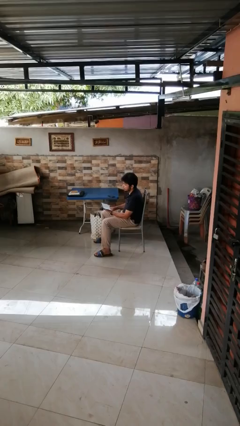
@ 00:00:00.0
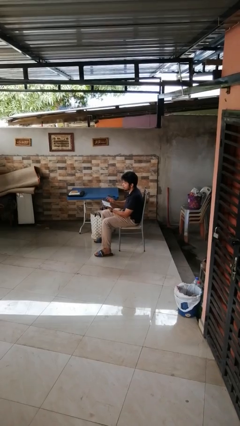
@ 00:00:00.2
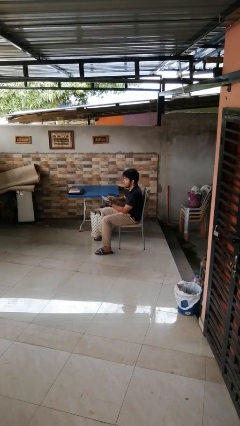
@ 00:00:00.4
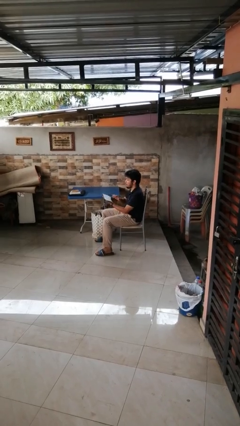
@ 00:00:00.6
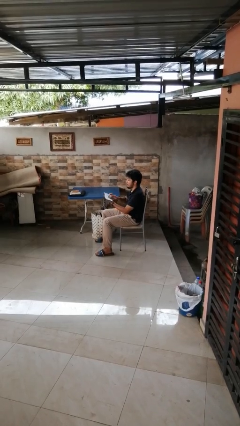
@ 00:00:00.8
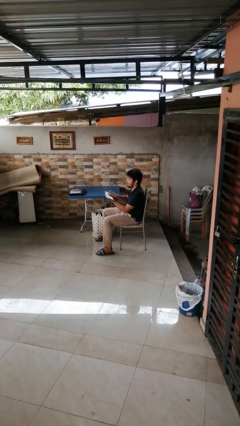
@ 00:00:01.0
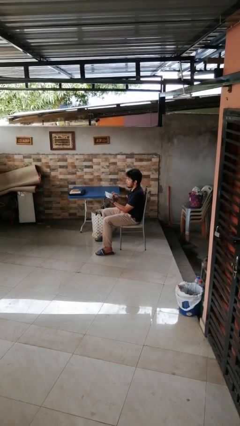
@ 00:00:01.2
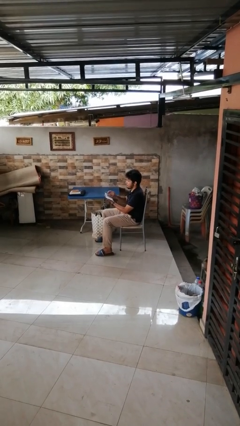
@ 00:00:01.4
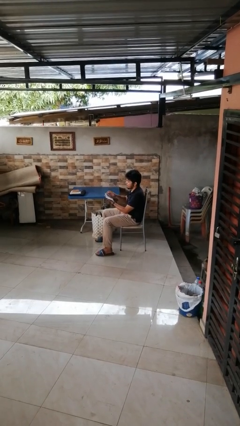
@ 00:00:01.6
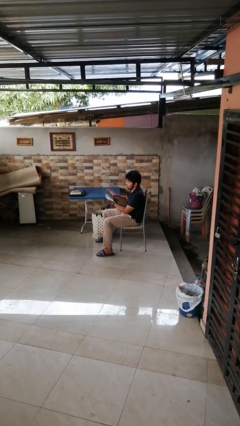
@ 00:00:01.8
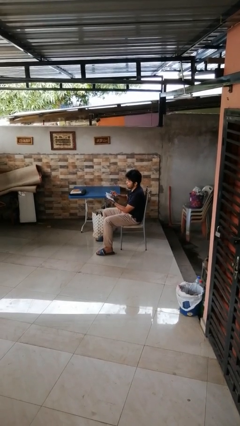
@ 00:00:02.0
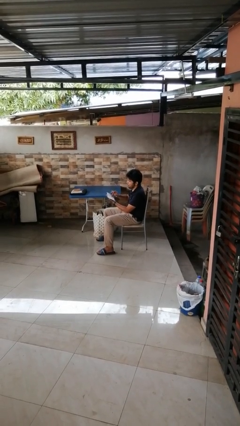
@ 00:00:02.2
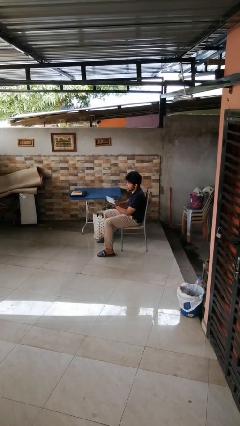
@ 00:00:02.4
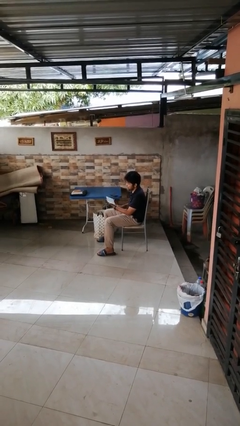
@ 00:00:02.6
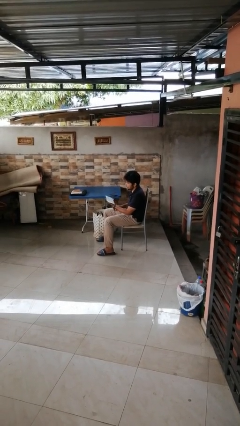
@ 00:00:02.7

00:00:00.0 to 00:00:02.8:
person interacts with tablet

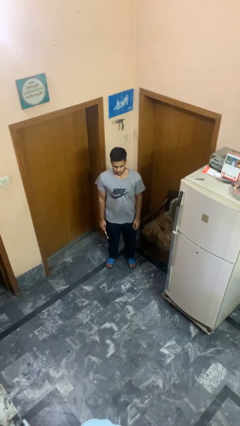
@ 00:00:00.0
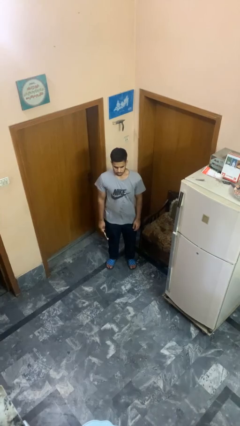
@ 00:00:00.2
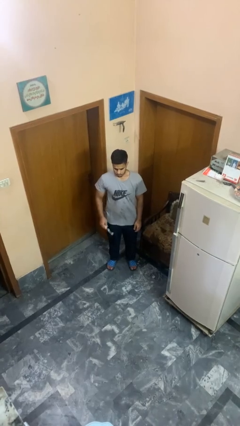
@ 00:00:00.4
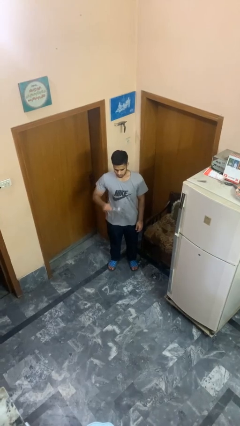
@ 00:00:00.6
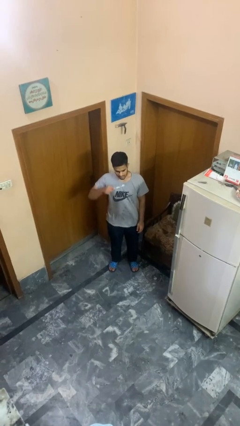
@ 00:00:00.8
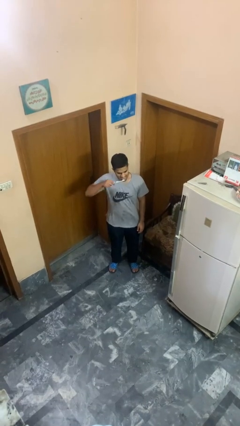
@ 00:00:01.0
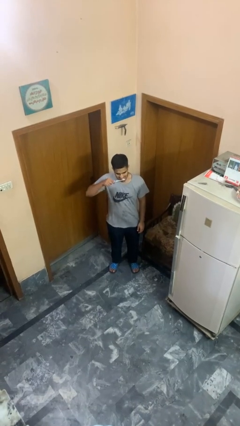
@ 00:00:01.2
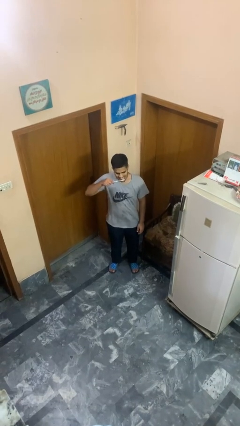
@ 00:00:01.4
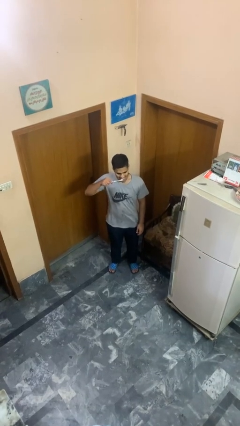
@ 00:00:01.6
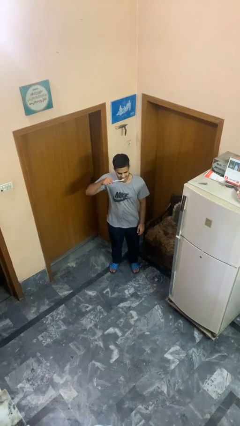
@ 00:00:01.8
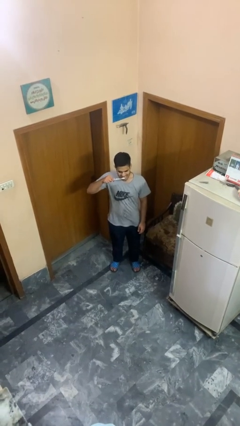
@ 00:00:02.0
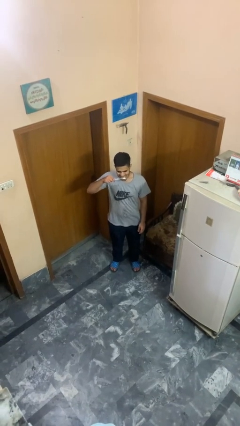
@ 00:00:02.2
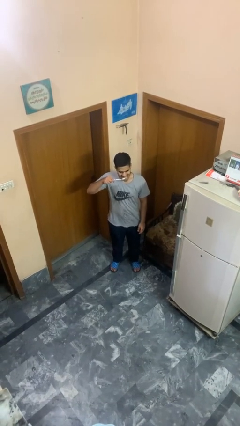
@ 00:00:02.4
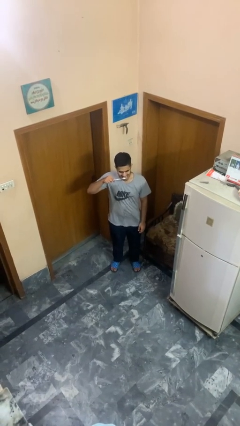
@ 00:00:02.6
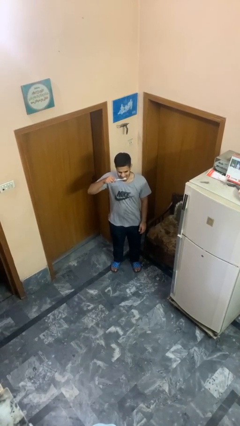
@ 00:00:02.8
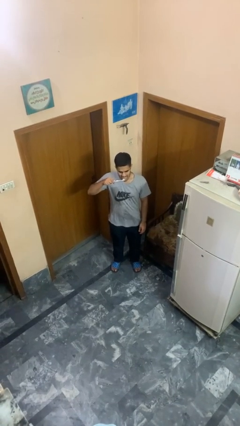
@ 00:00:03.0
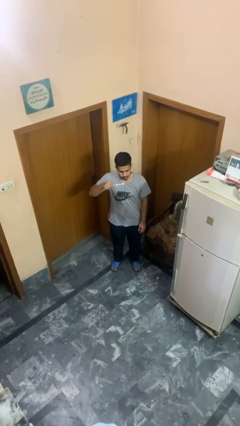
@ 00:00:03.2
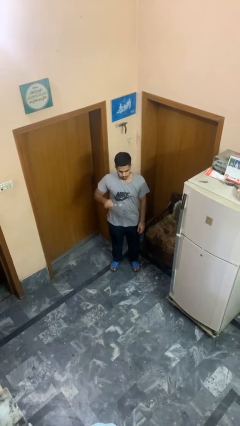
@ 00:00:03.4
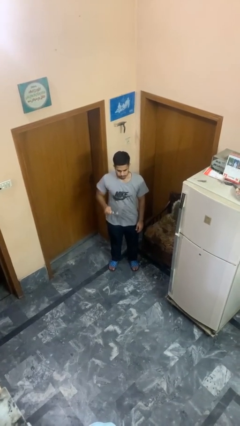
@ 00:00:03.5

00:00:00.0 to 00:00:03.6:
person brushes teeth

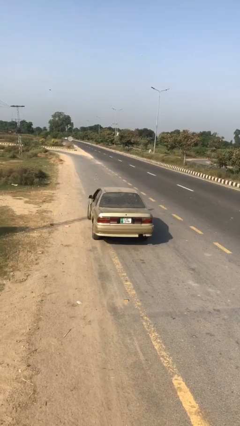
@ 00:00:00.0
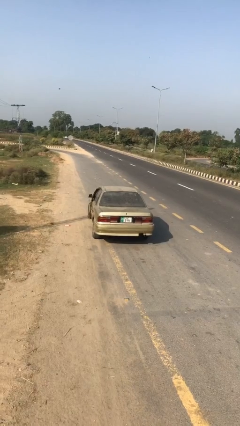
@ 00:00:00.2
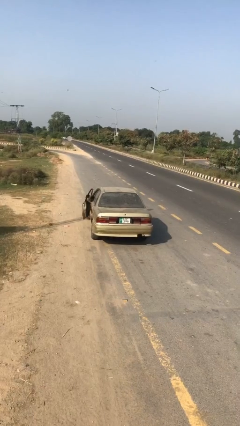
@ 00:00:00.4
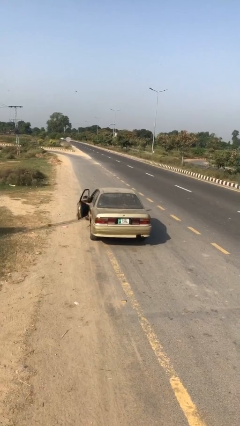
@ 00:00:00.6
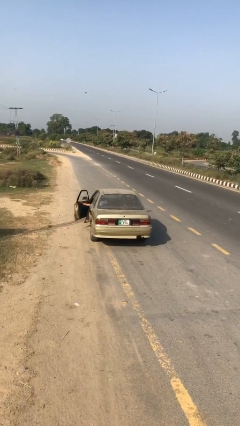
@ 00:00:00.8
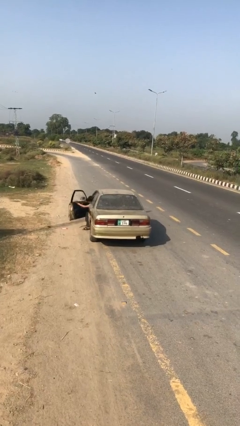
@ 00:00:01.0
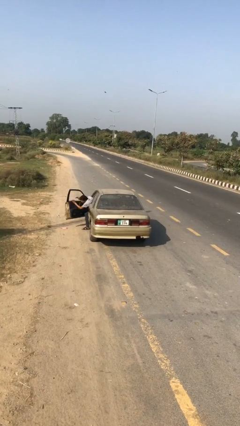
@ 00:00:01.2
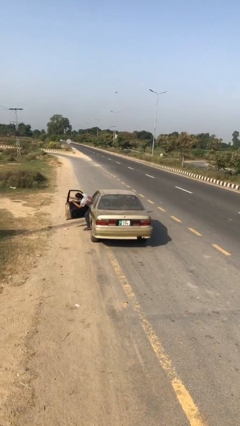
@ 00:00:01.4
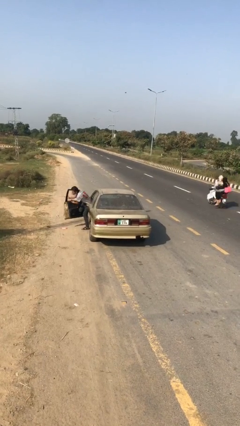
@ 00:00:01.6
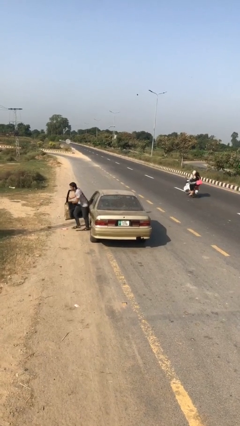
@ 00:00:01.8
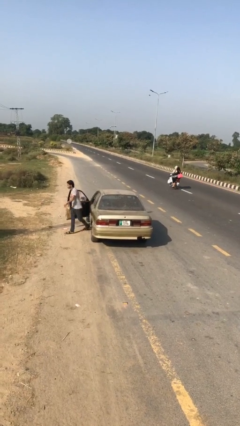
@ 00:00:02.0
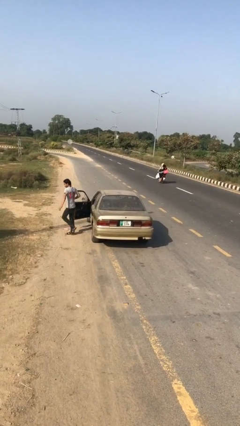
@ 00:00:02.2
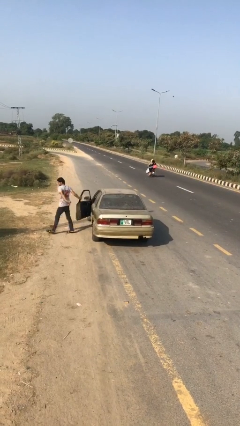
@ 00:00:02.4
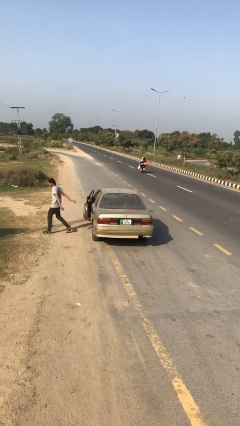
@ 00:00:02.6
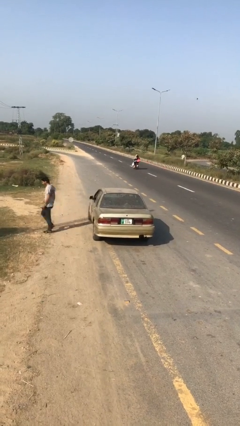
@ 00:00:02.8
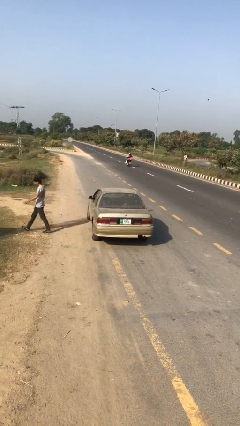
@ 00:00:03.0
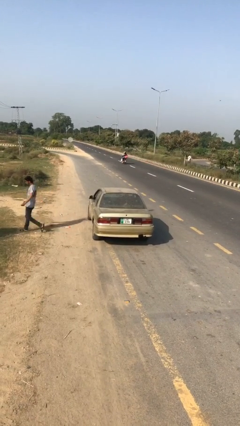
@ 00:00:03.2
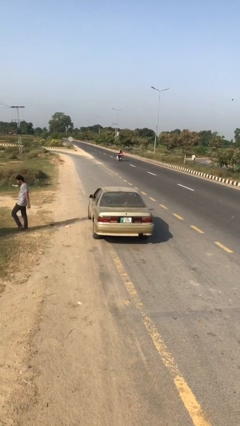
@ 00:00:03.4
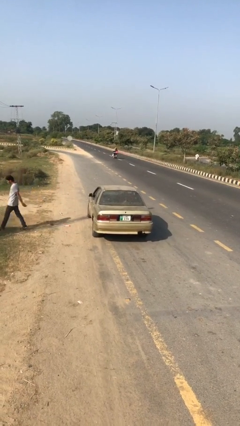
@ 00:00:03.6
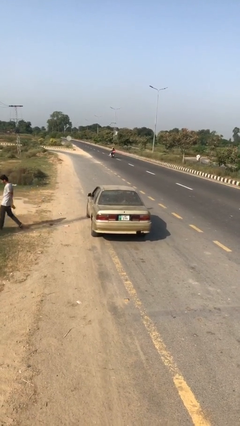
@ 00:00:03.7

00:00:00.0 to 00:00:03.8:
car drops off person

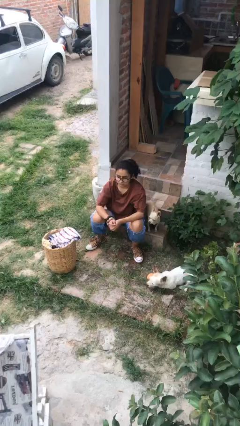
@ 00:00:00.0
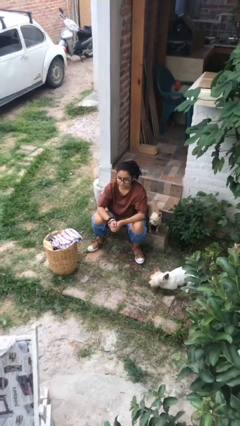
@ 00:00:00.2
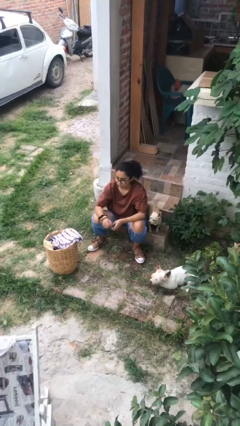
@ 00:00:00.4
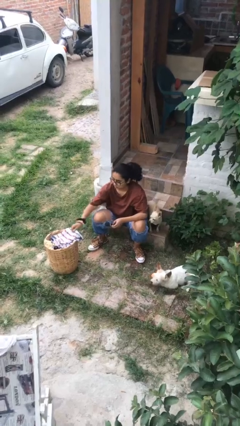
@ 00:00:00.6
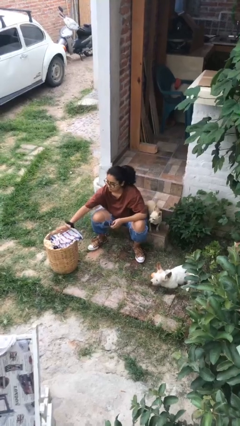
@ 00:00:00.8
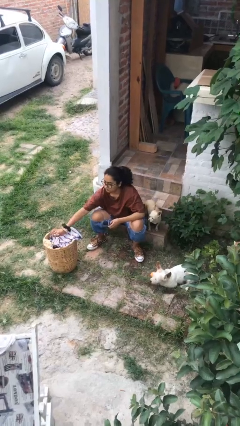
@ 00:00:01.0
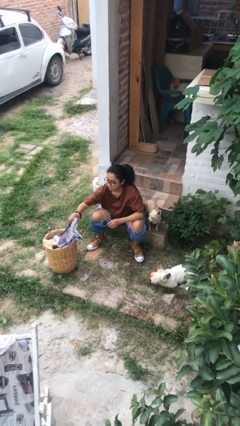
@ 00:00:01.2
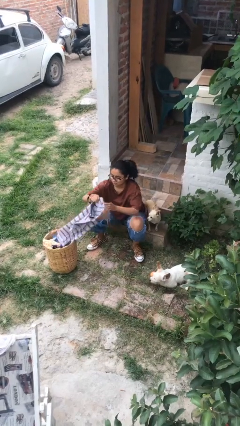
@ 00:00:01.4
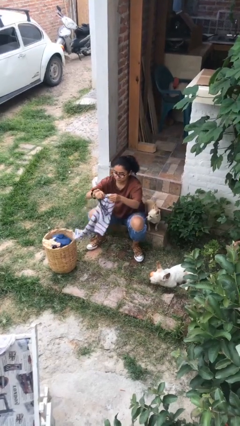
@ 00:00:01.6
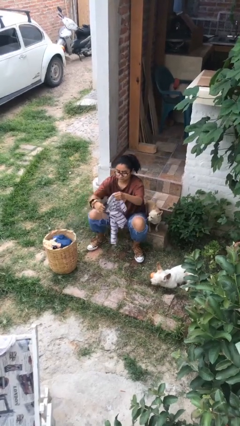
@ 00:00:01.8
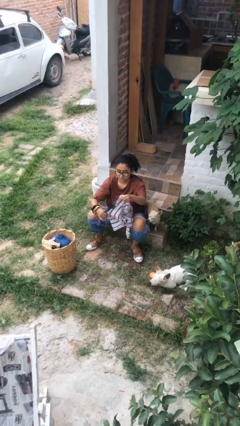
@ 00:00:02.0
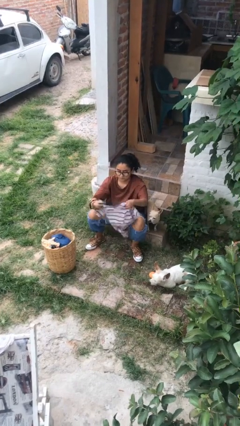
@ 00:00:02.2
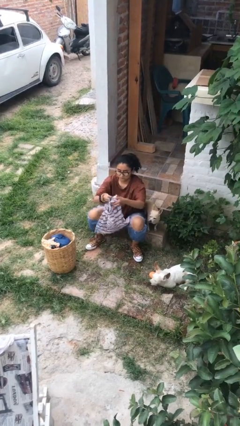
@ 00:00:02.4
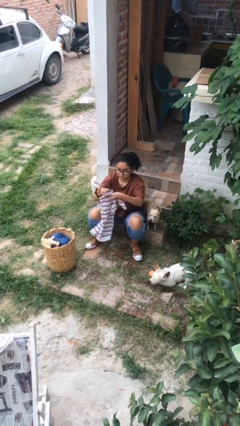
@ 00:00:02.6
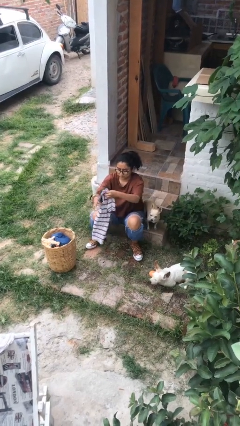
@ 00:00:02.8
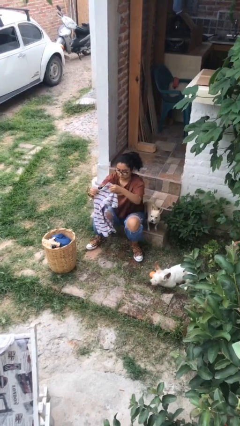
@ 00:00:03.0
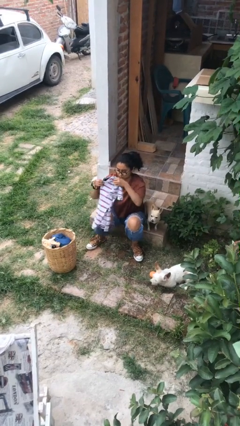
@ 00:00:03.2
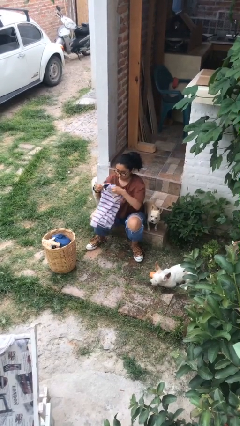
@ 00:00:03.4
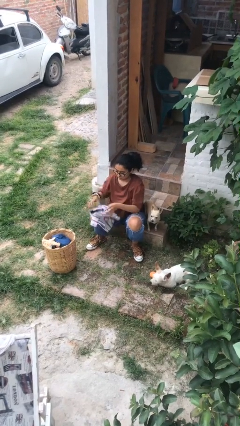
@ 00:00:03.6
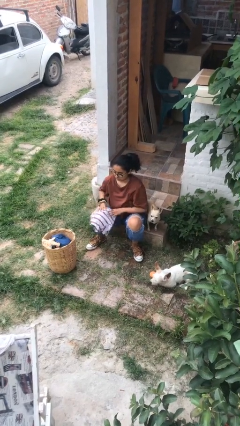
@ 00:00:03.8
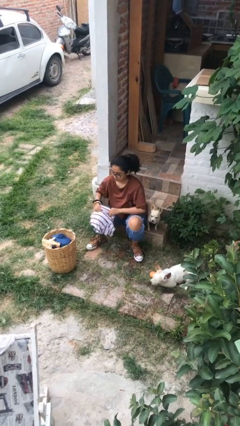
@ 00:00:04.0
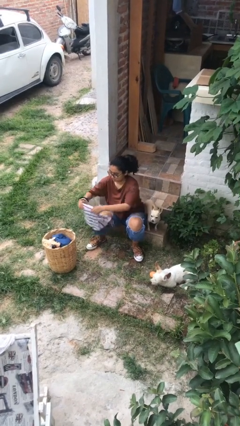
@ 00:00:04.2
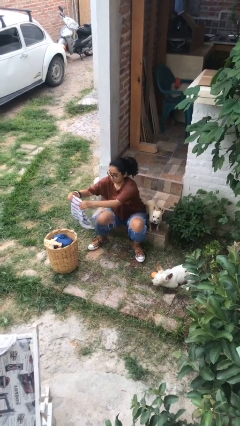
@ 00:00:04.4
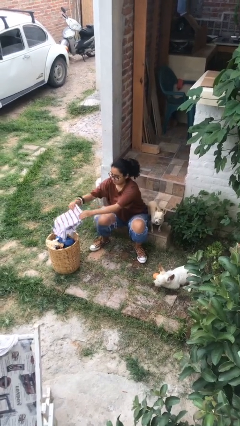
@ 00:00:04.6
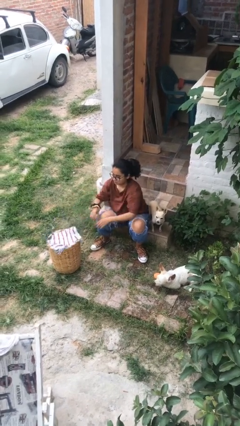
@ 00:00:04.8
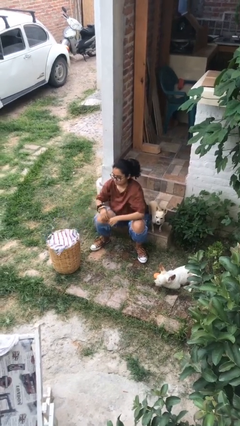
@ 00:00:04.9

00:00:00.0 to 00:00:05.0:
person folds shirt

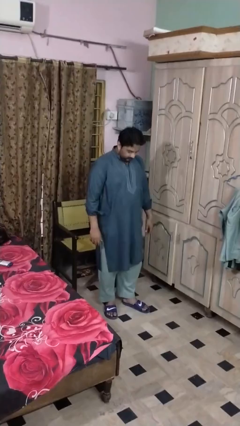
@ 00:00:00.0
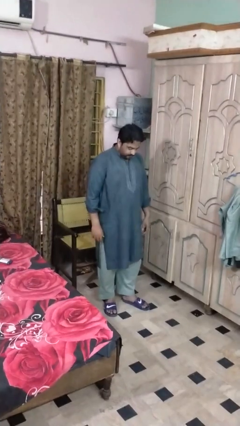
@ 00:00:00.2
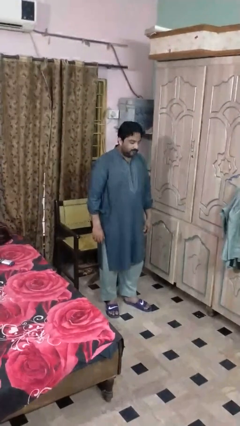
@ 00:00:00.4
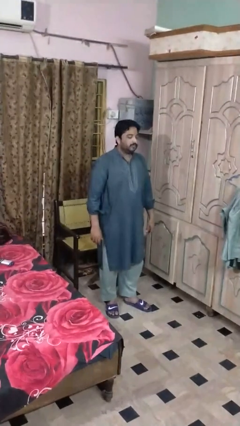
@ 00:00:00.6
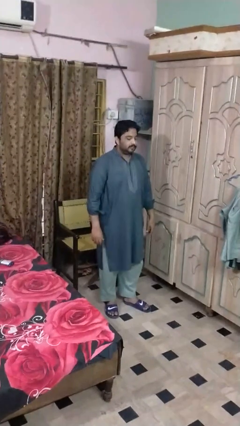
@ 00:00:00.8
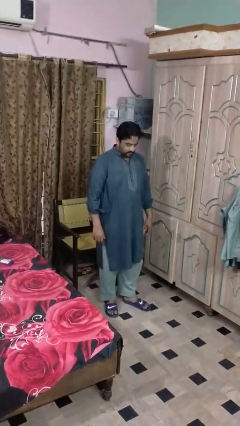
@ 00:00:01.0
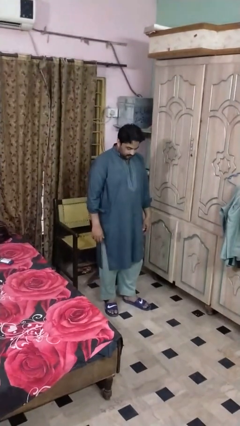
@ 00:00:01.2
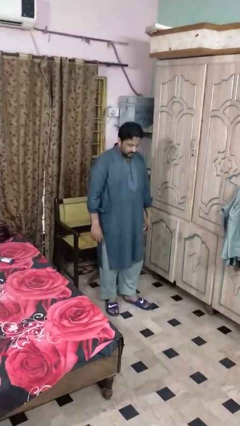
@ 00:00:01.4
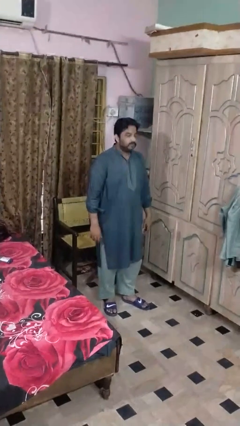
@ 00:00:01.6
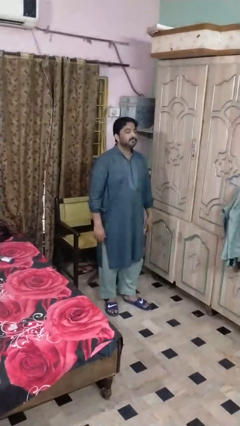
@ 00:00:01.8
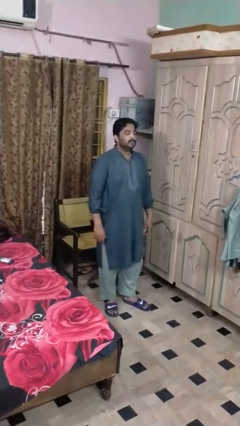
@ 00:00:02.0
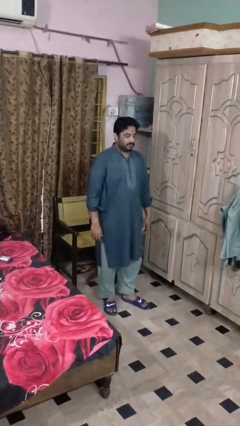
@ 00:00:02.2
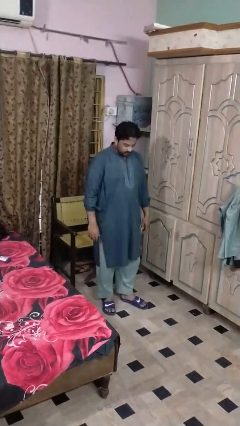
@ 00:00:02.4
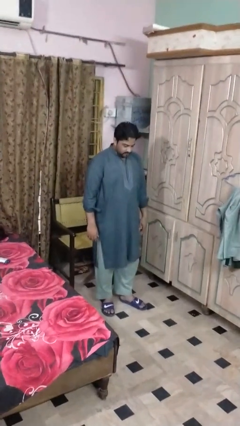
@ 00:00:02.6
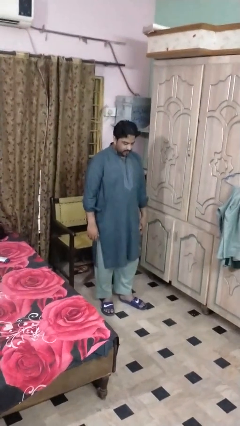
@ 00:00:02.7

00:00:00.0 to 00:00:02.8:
person nods head
